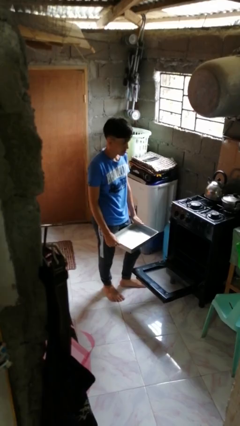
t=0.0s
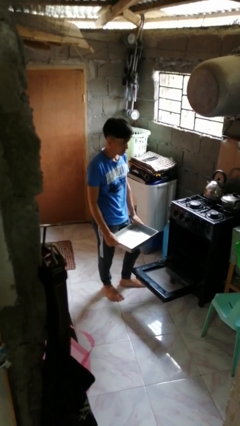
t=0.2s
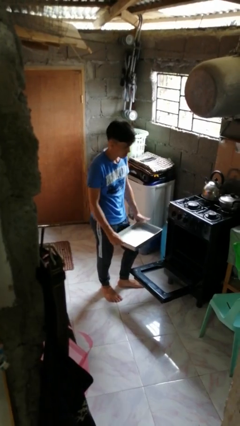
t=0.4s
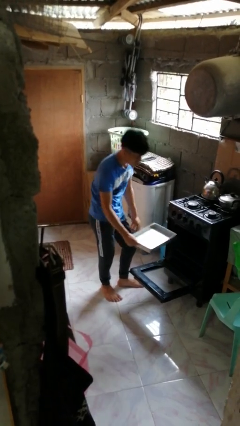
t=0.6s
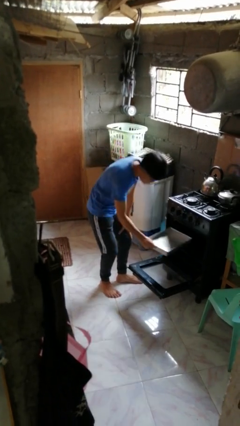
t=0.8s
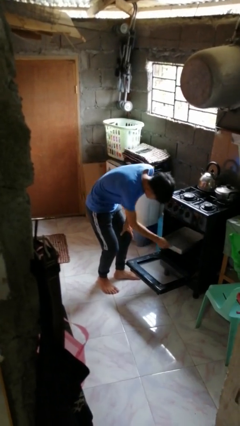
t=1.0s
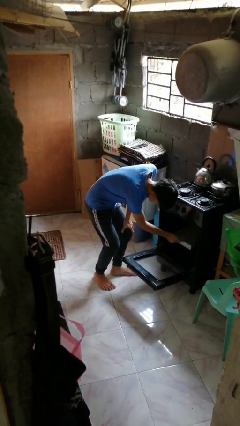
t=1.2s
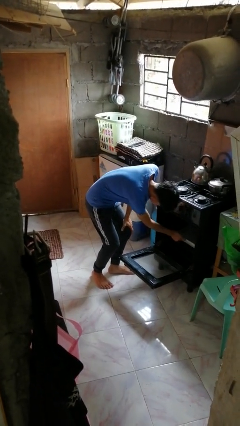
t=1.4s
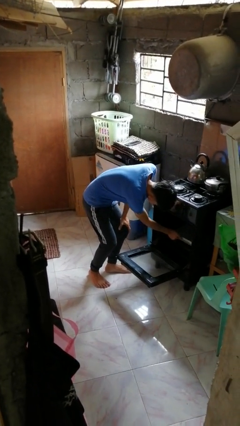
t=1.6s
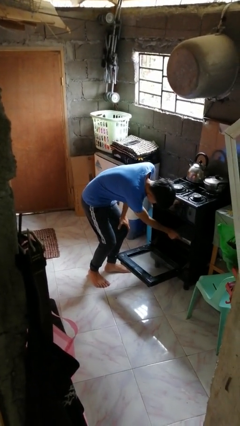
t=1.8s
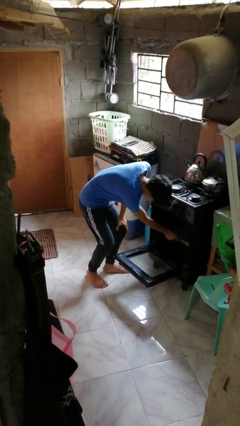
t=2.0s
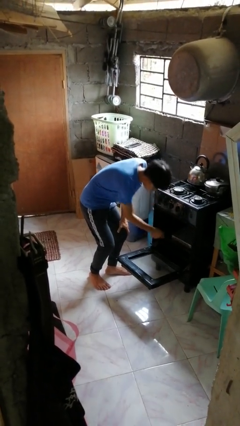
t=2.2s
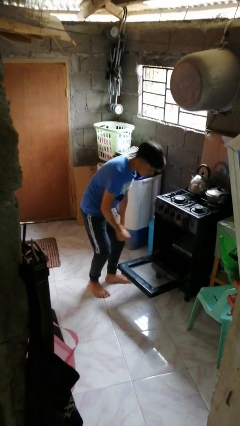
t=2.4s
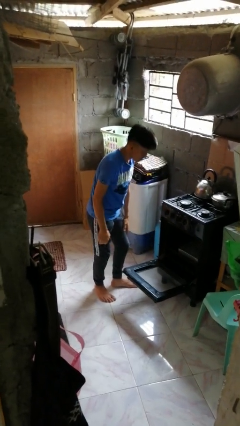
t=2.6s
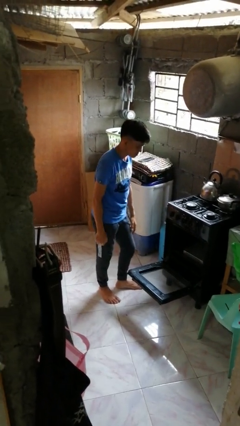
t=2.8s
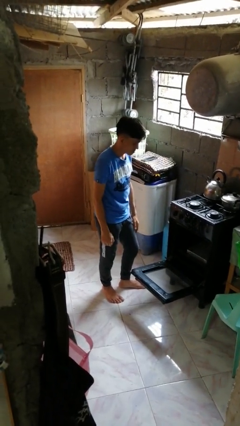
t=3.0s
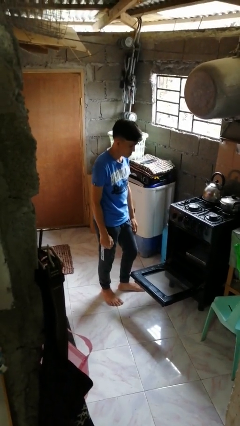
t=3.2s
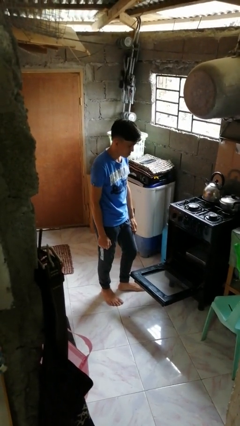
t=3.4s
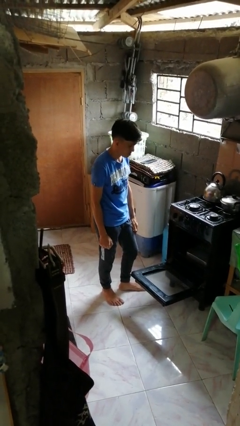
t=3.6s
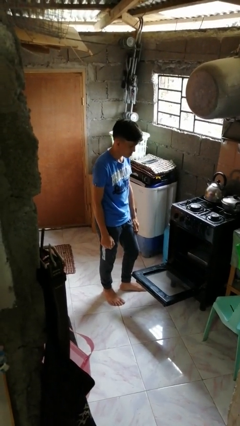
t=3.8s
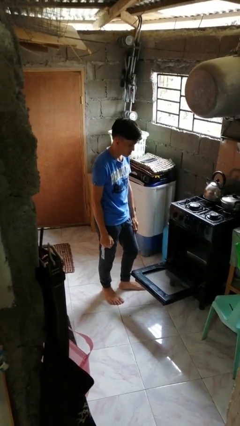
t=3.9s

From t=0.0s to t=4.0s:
person puts object into oven

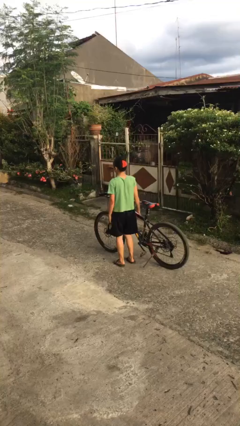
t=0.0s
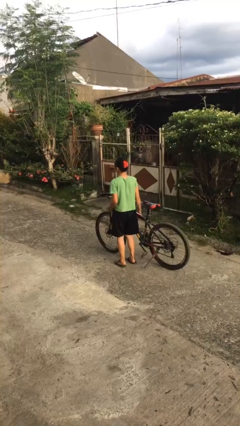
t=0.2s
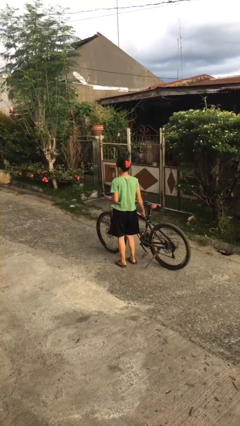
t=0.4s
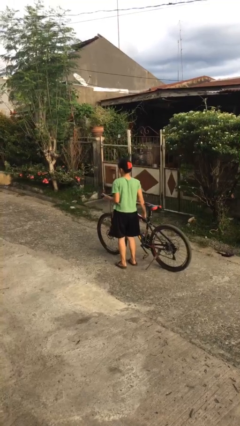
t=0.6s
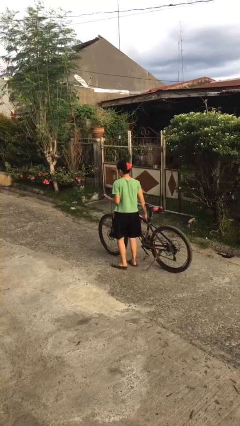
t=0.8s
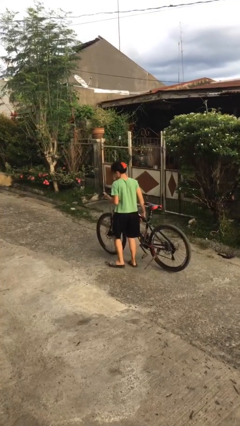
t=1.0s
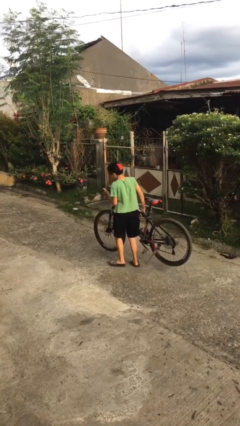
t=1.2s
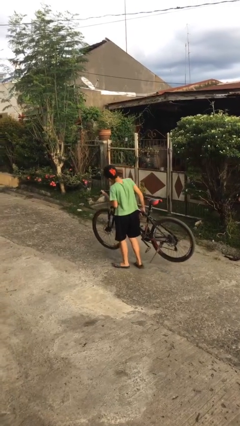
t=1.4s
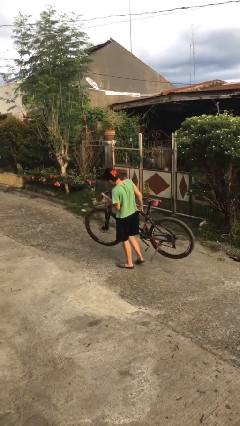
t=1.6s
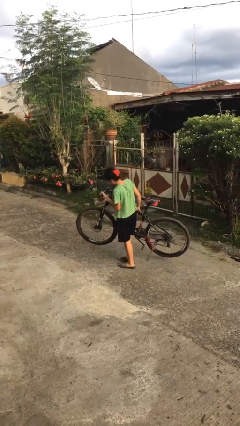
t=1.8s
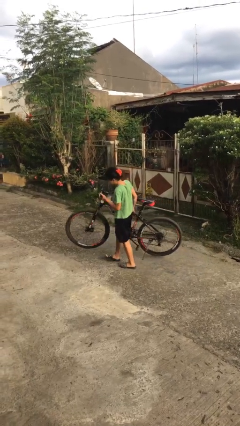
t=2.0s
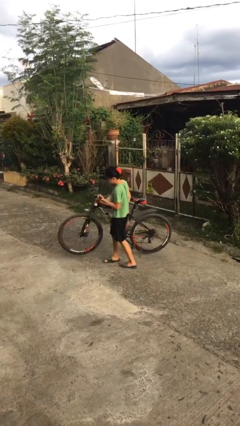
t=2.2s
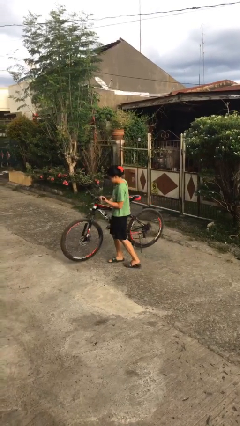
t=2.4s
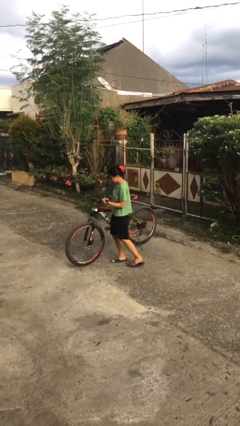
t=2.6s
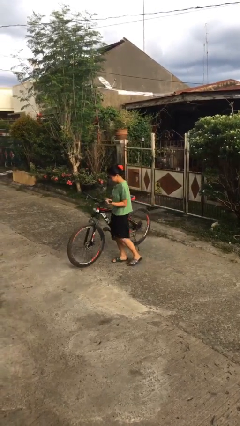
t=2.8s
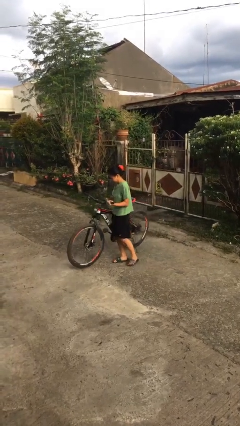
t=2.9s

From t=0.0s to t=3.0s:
person carries bicycle

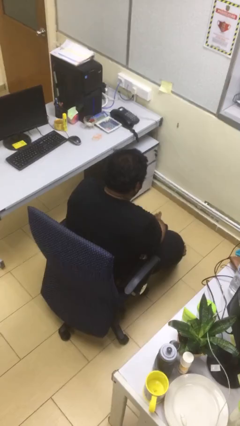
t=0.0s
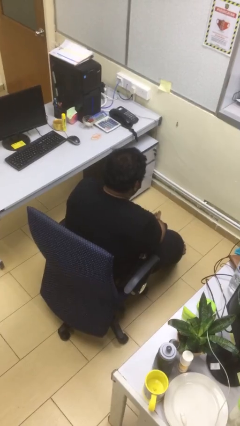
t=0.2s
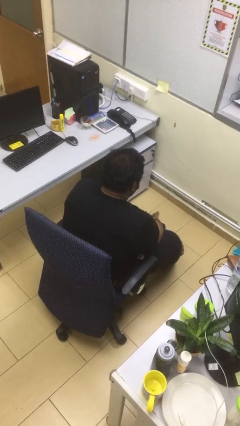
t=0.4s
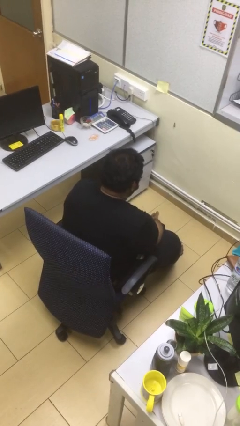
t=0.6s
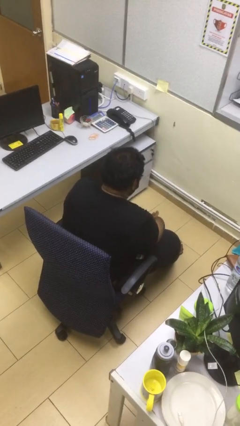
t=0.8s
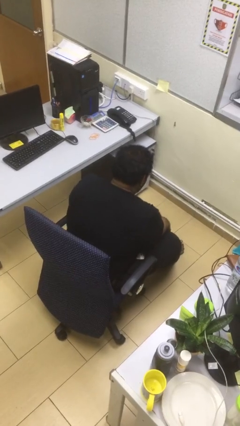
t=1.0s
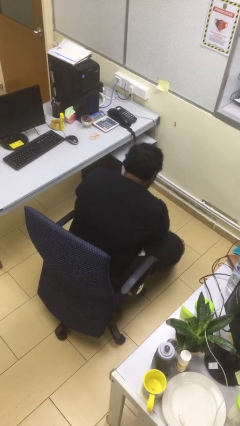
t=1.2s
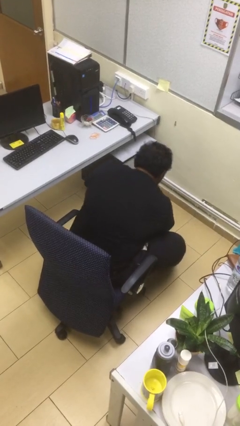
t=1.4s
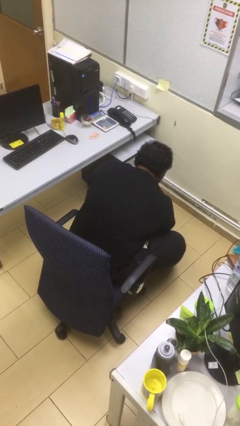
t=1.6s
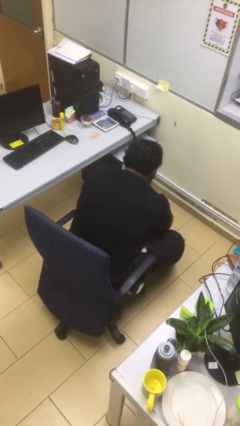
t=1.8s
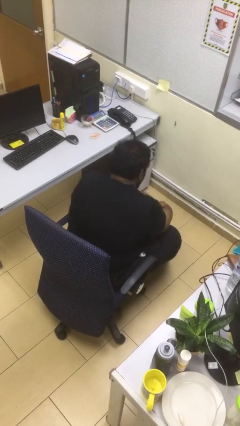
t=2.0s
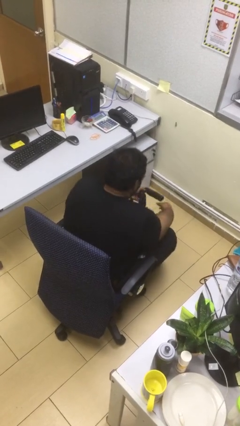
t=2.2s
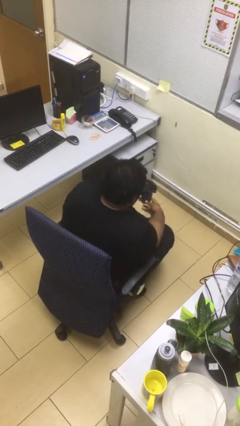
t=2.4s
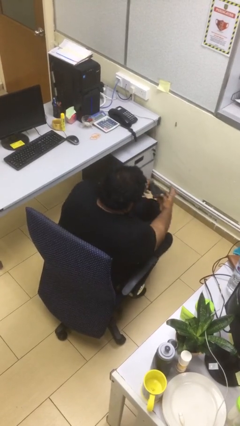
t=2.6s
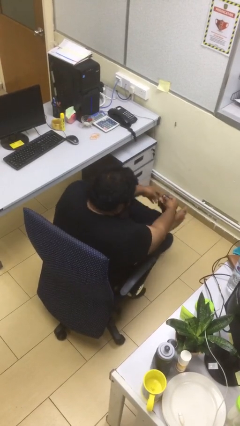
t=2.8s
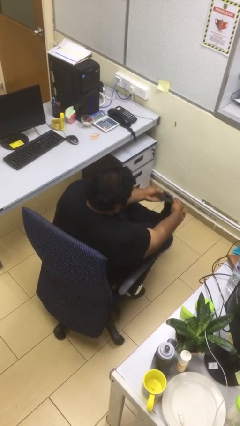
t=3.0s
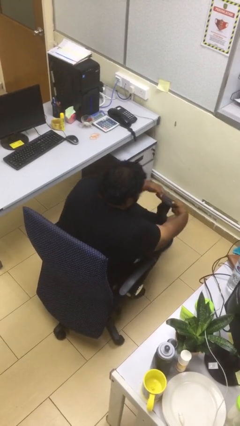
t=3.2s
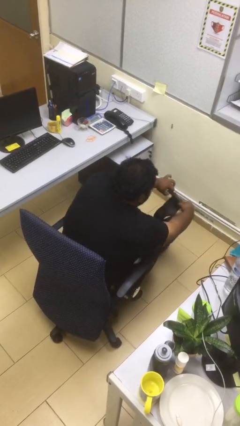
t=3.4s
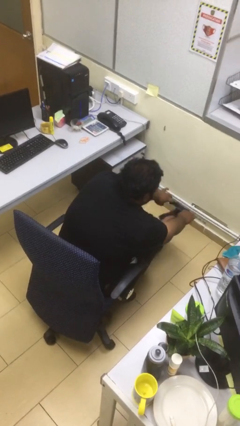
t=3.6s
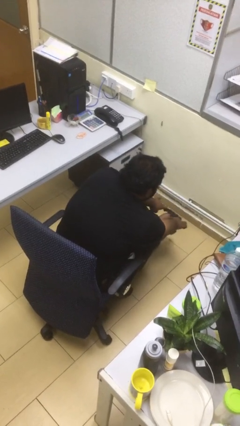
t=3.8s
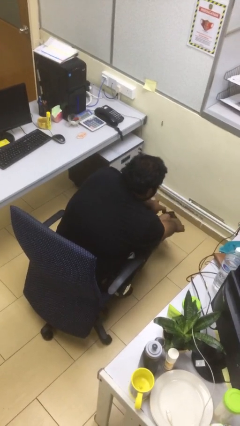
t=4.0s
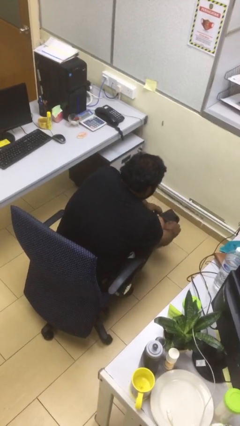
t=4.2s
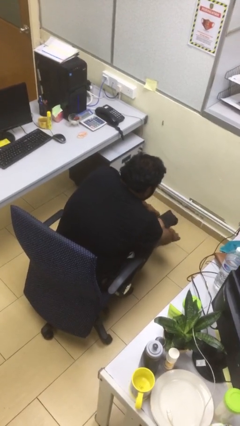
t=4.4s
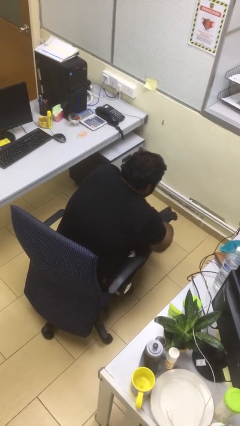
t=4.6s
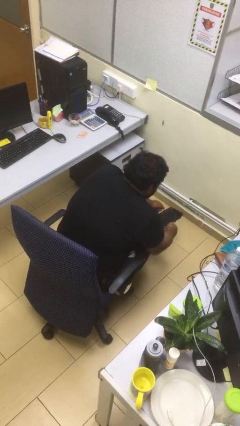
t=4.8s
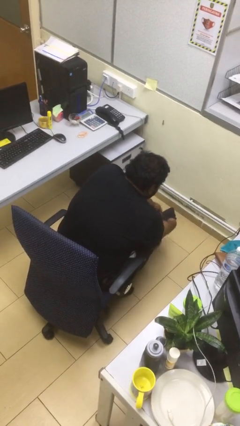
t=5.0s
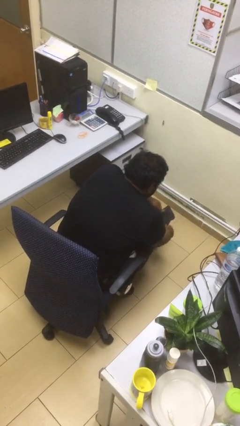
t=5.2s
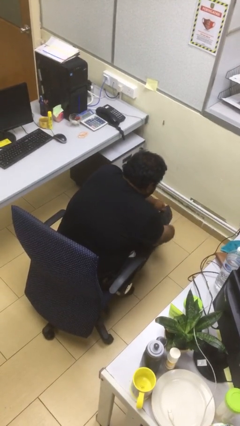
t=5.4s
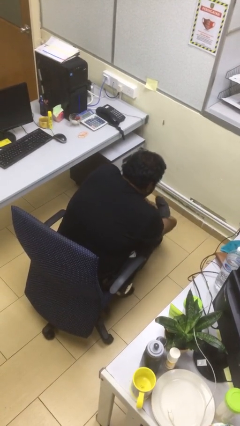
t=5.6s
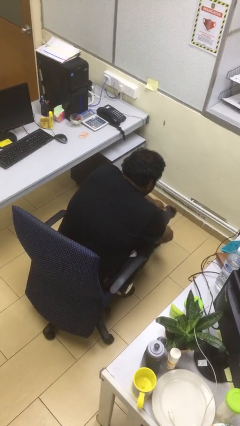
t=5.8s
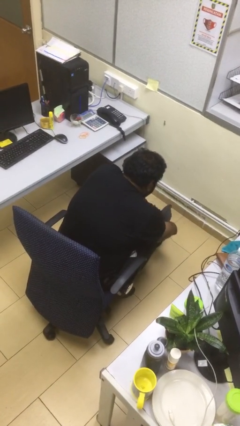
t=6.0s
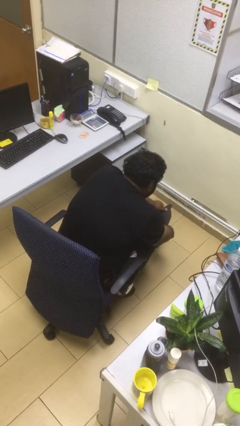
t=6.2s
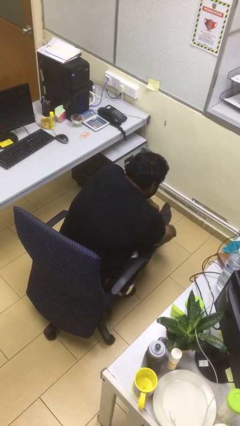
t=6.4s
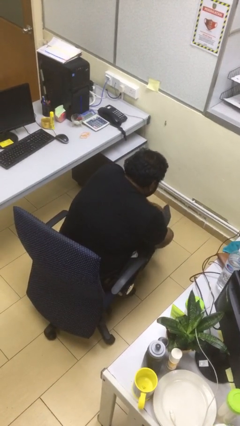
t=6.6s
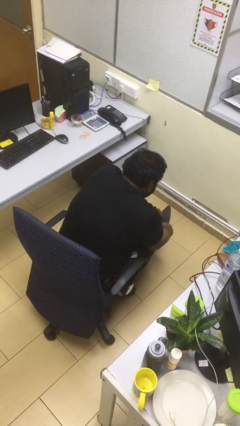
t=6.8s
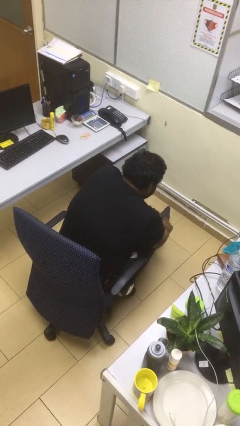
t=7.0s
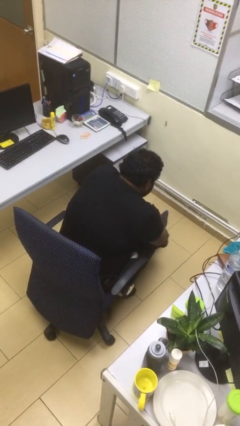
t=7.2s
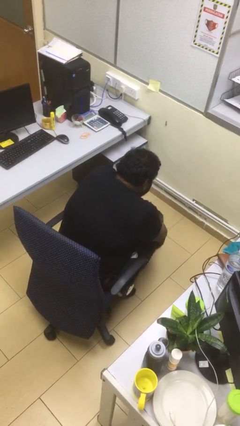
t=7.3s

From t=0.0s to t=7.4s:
person puts on socks

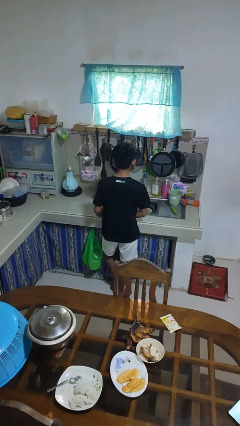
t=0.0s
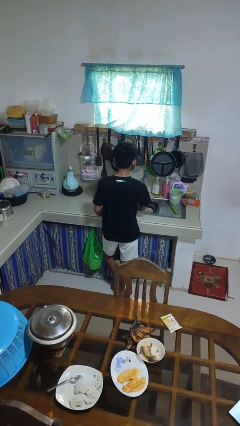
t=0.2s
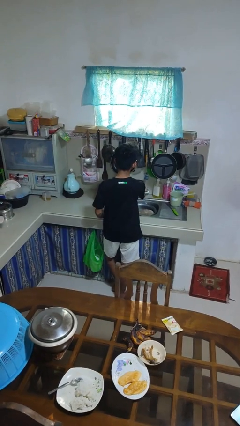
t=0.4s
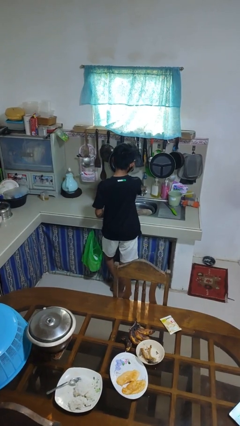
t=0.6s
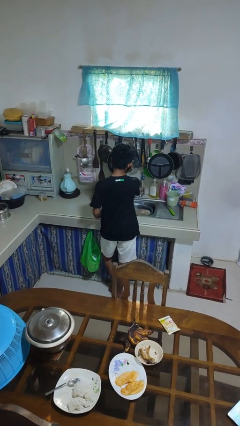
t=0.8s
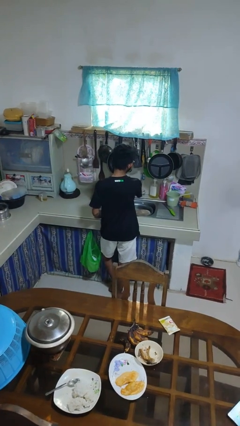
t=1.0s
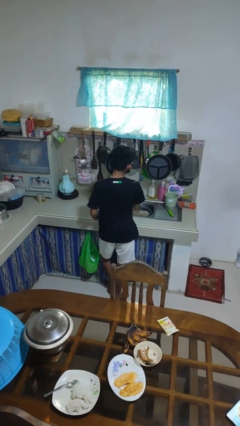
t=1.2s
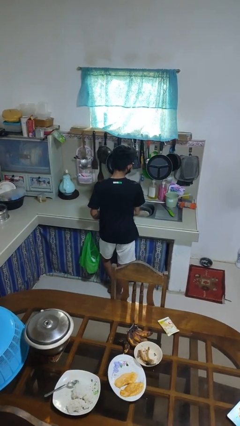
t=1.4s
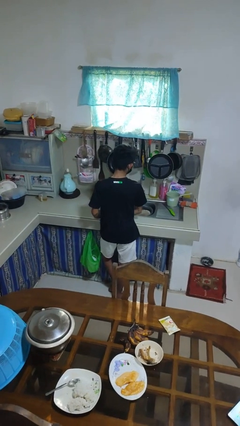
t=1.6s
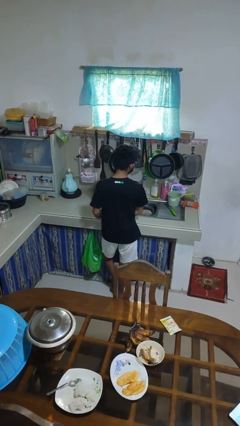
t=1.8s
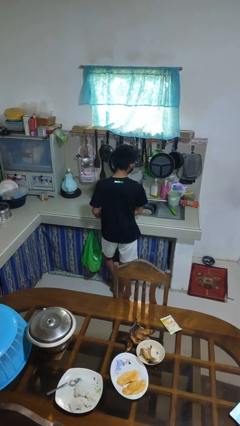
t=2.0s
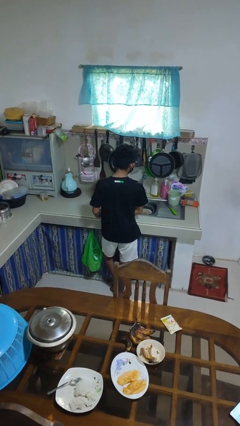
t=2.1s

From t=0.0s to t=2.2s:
person opens clothes washer

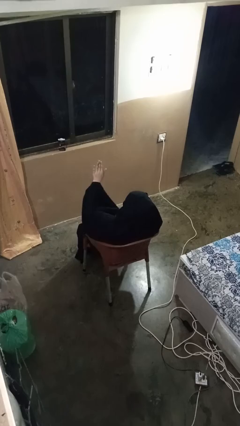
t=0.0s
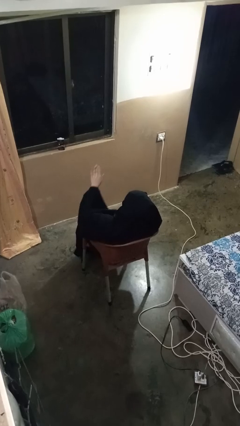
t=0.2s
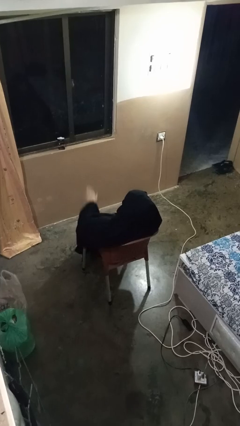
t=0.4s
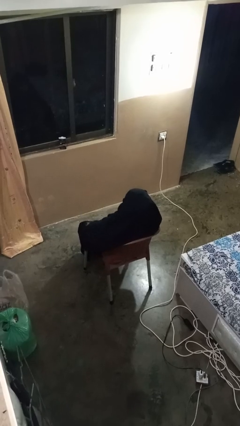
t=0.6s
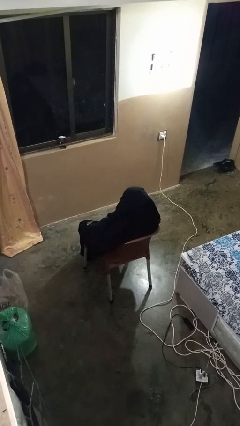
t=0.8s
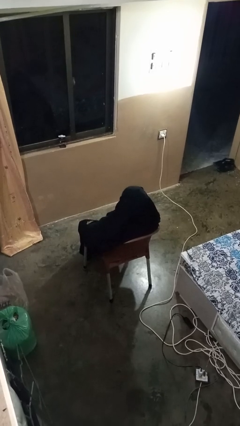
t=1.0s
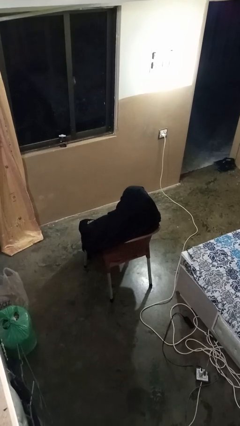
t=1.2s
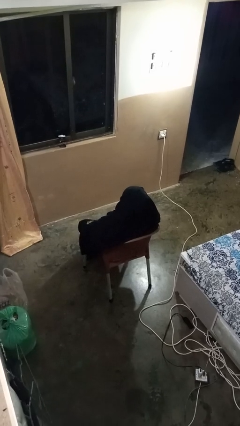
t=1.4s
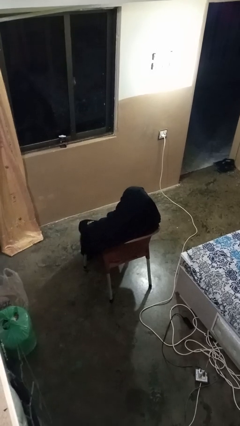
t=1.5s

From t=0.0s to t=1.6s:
person gestures lower hand
